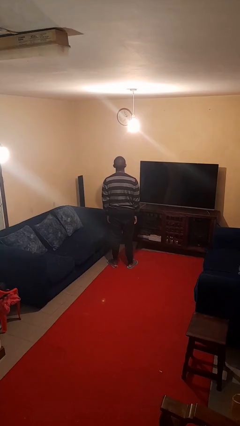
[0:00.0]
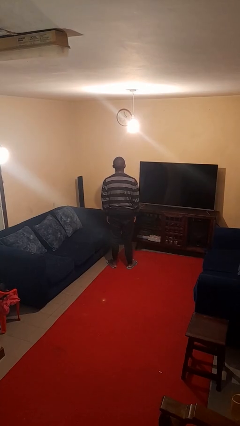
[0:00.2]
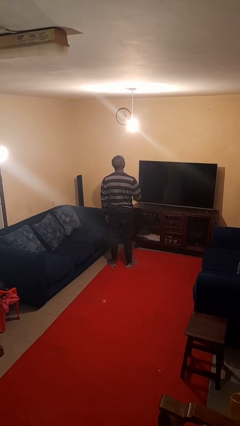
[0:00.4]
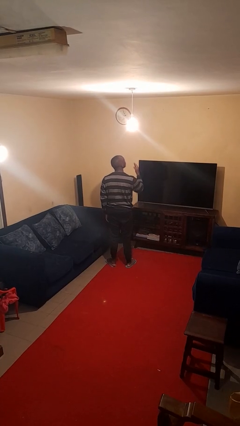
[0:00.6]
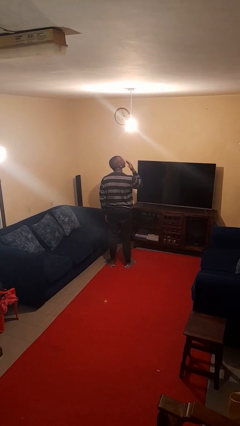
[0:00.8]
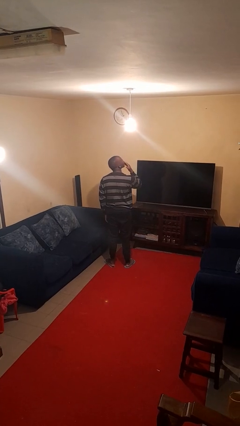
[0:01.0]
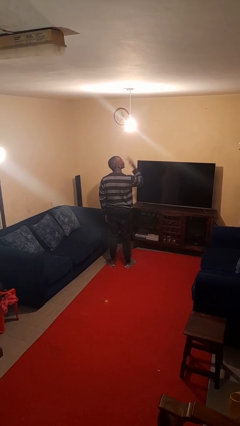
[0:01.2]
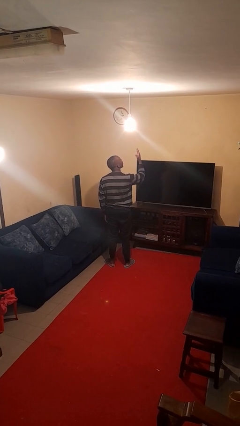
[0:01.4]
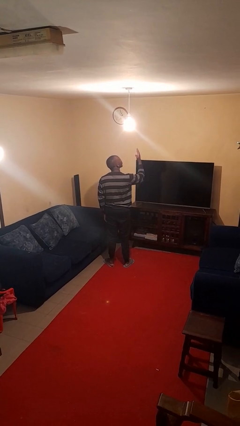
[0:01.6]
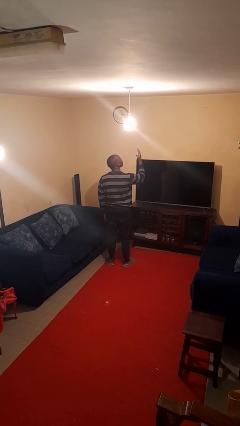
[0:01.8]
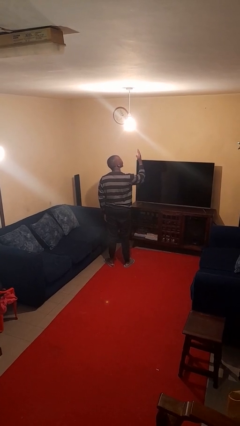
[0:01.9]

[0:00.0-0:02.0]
person gestures blow kiss

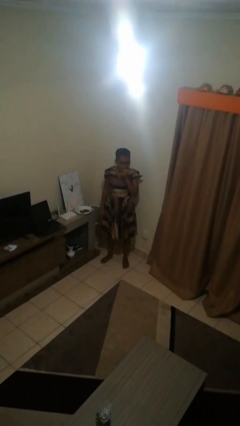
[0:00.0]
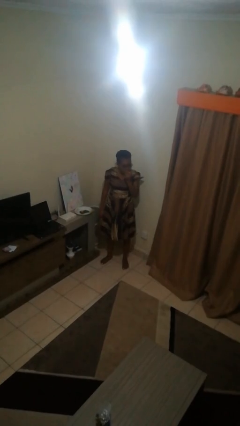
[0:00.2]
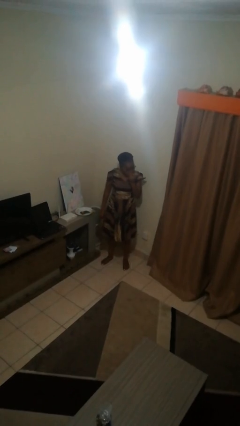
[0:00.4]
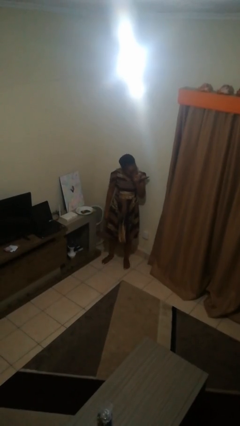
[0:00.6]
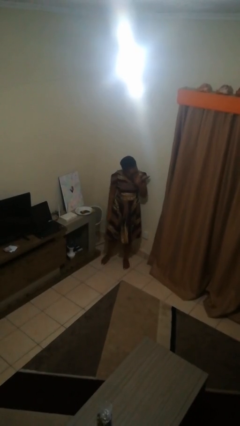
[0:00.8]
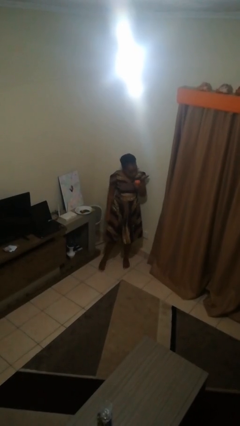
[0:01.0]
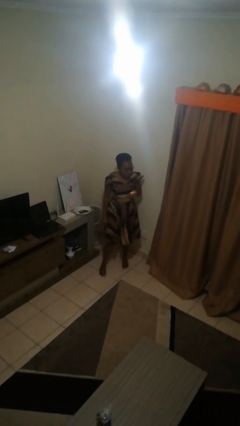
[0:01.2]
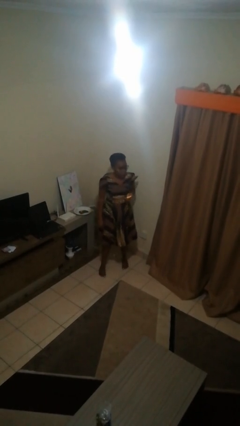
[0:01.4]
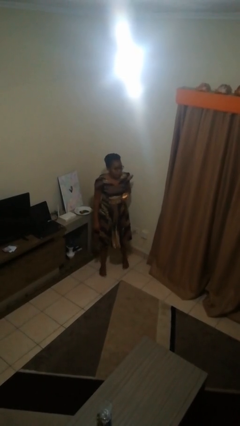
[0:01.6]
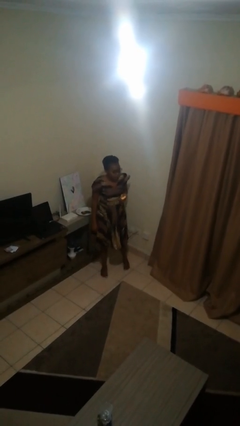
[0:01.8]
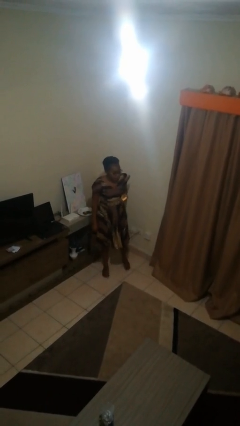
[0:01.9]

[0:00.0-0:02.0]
person eats apple

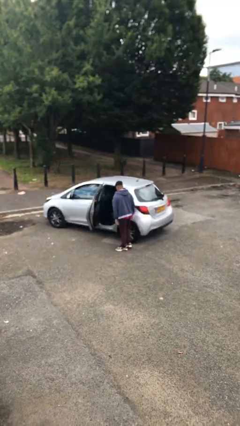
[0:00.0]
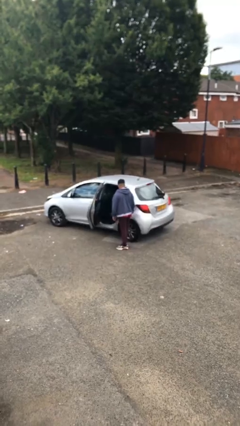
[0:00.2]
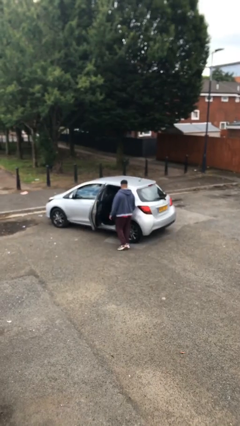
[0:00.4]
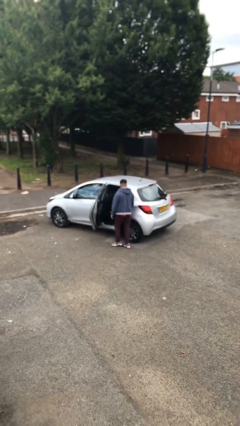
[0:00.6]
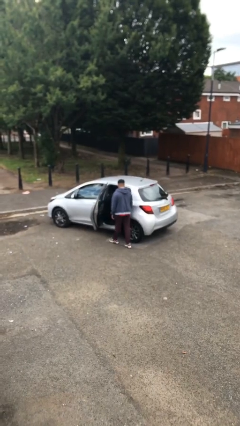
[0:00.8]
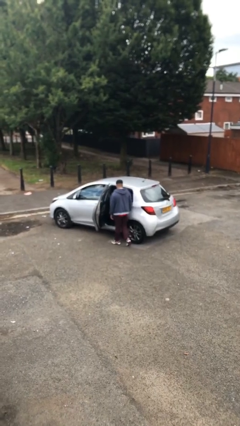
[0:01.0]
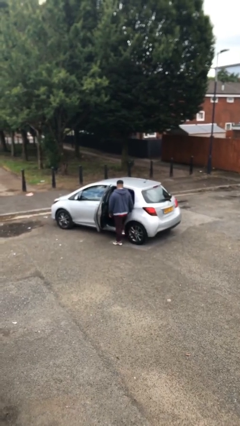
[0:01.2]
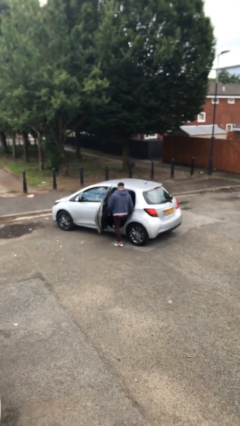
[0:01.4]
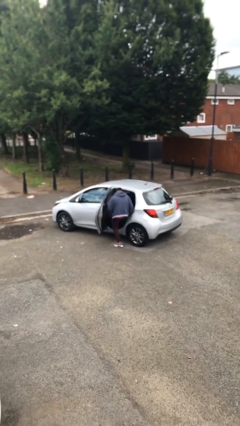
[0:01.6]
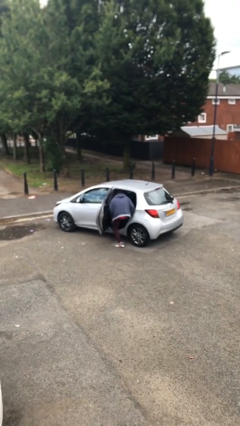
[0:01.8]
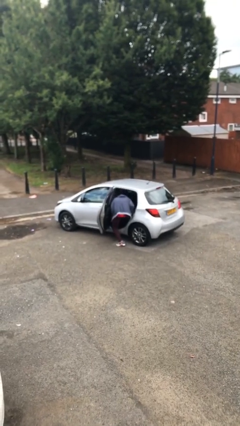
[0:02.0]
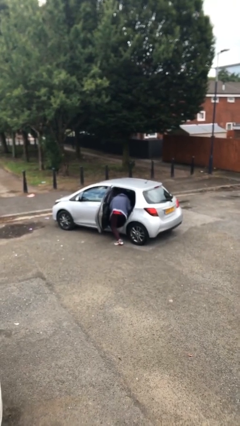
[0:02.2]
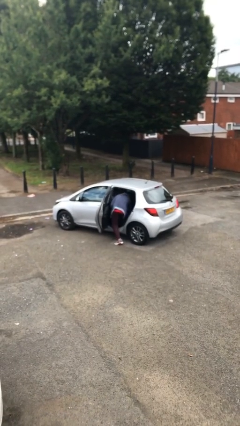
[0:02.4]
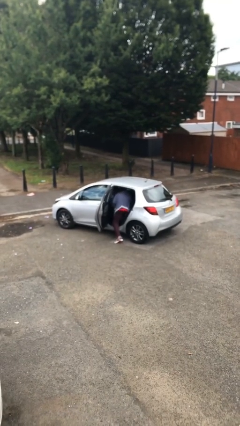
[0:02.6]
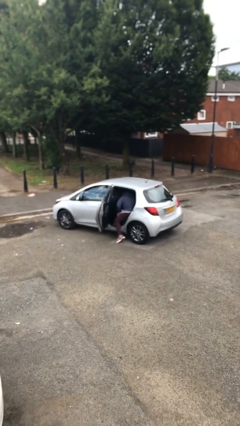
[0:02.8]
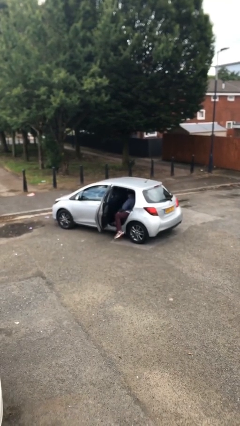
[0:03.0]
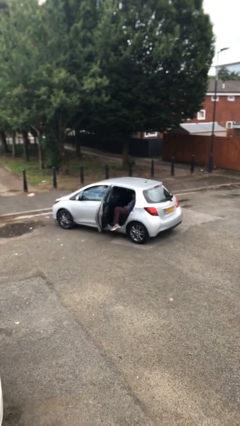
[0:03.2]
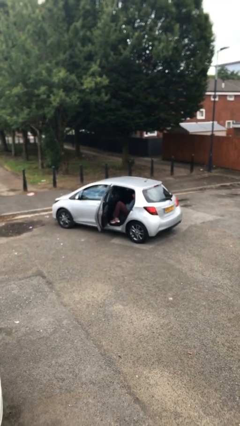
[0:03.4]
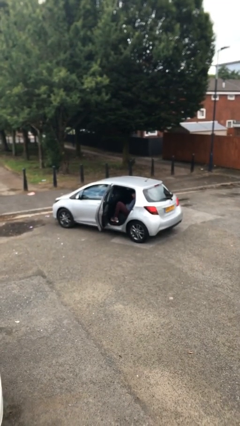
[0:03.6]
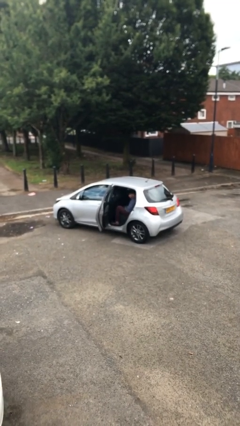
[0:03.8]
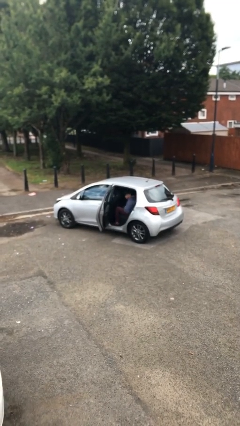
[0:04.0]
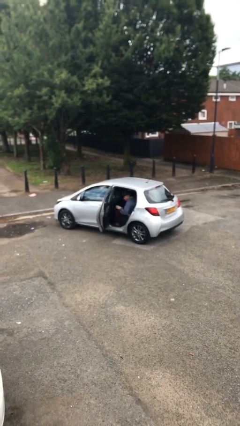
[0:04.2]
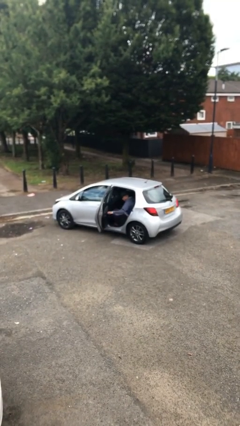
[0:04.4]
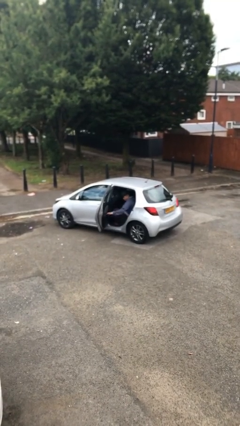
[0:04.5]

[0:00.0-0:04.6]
person enters car

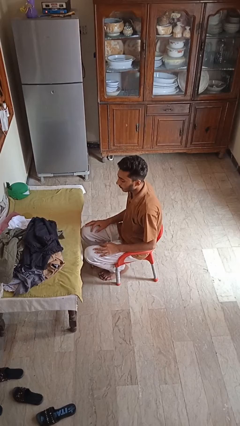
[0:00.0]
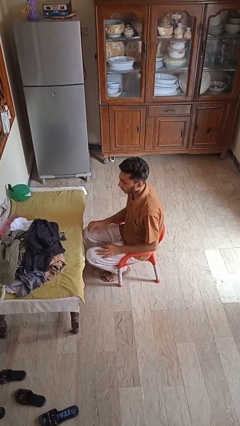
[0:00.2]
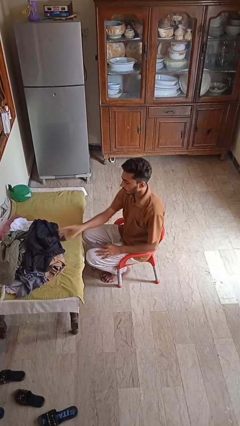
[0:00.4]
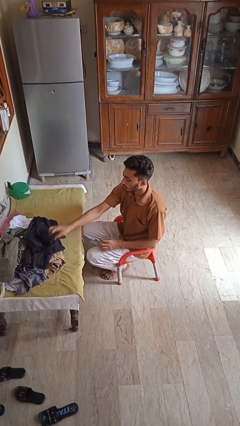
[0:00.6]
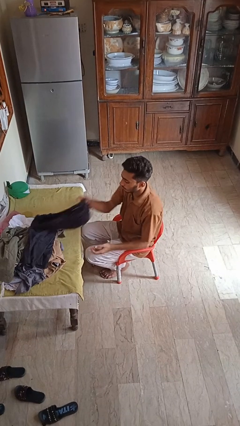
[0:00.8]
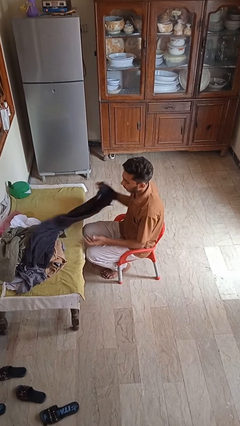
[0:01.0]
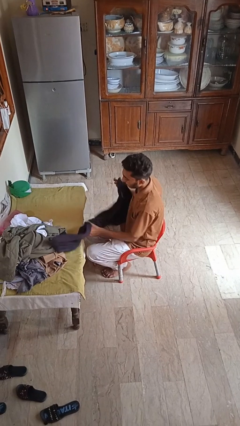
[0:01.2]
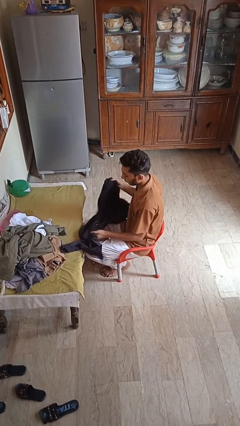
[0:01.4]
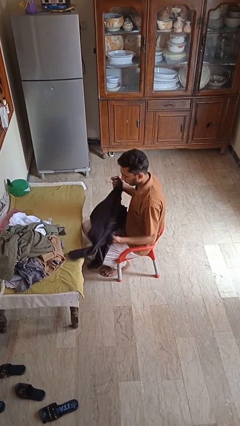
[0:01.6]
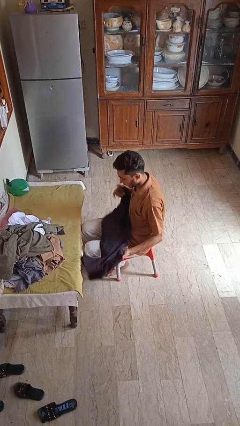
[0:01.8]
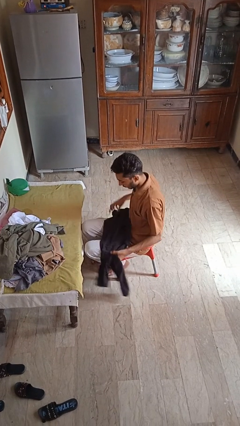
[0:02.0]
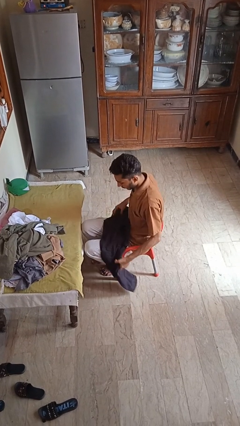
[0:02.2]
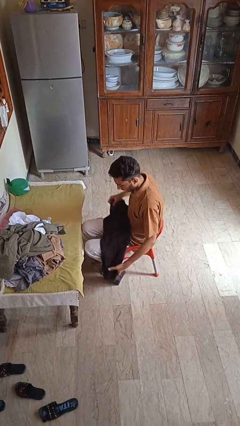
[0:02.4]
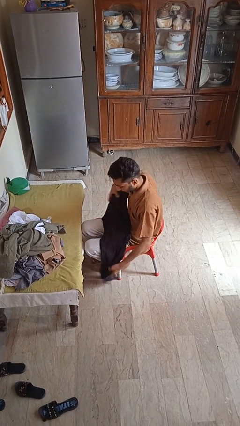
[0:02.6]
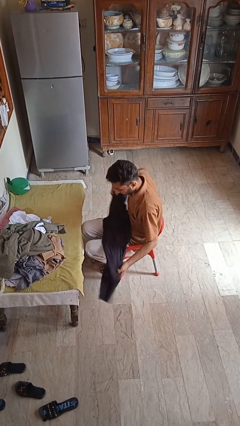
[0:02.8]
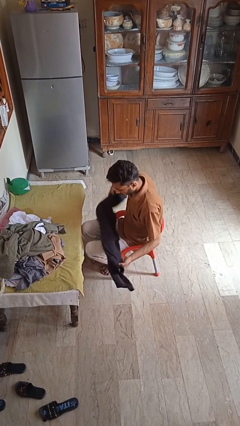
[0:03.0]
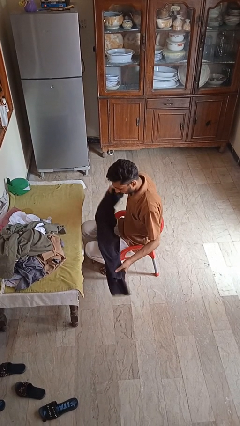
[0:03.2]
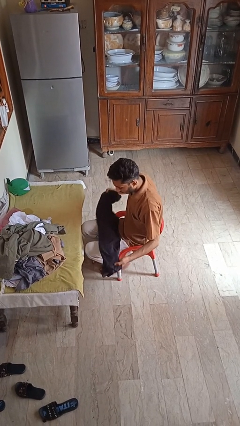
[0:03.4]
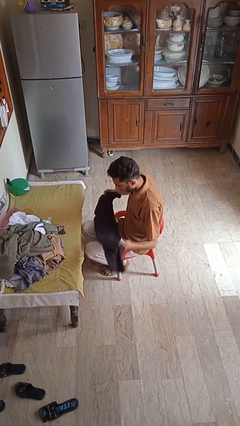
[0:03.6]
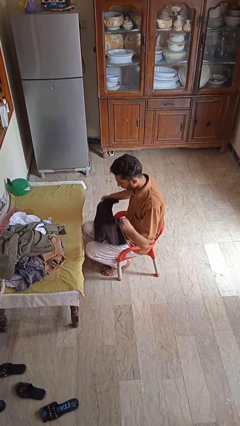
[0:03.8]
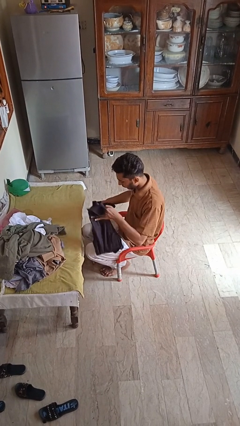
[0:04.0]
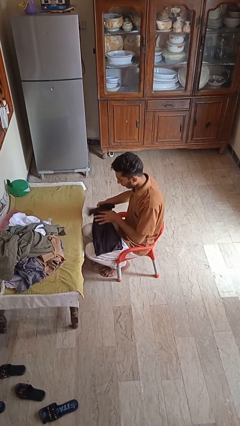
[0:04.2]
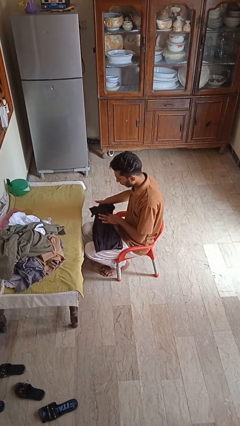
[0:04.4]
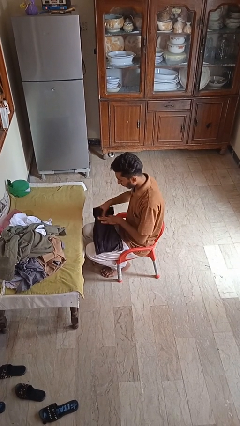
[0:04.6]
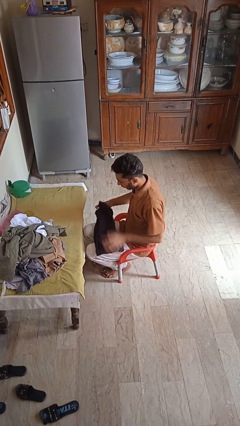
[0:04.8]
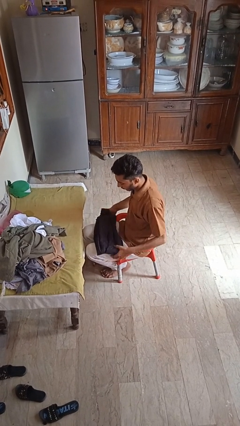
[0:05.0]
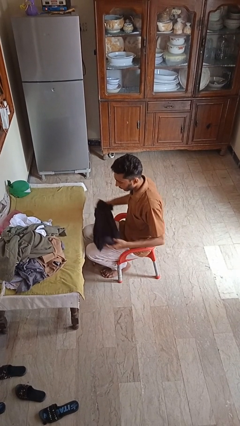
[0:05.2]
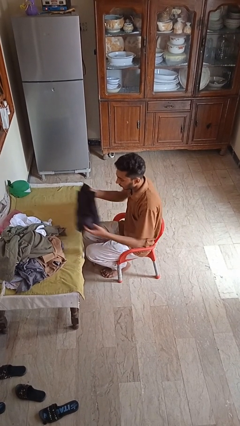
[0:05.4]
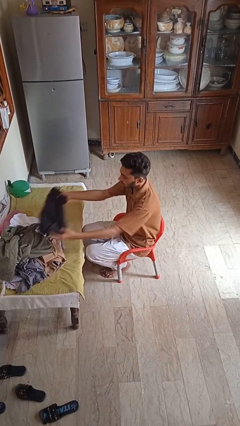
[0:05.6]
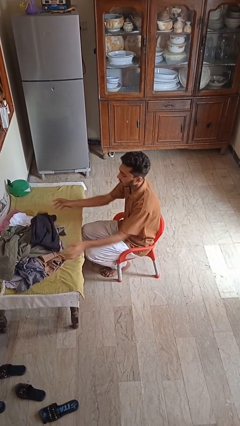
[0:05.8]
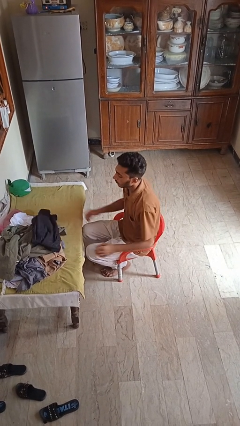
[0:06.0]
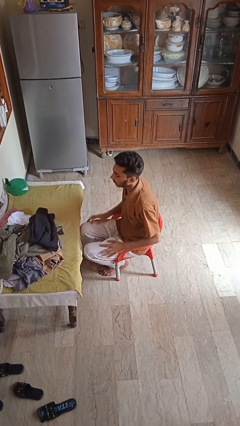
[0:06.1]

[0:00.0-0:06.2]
person folds pants

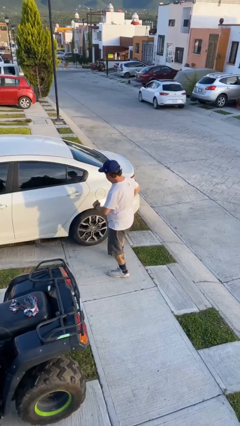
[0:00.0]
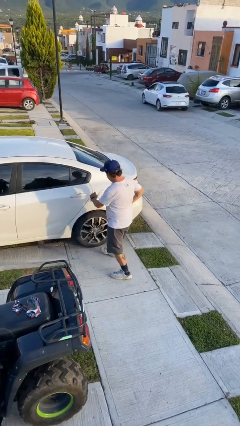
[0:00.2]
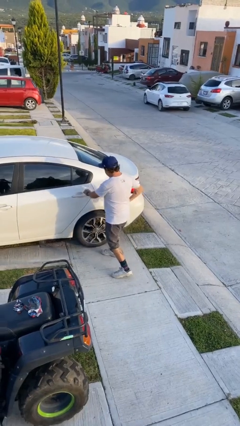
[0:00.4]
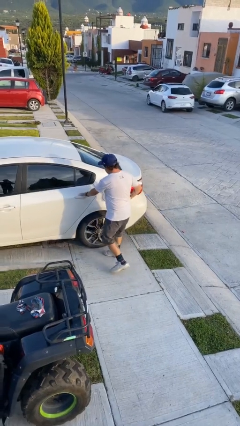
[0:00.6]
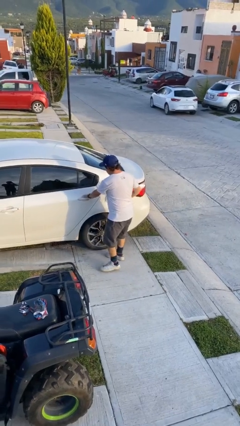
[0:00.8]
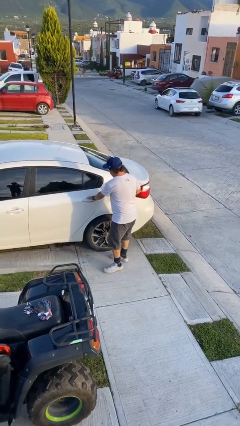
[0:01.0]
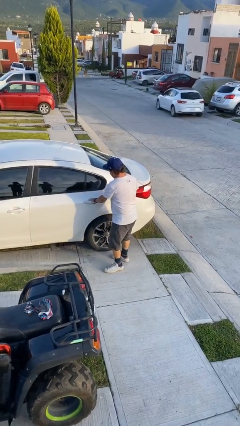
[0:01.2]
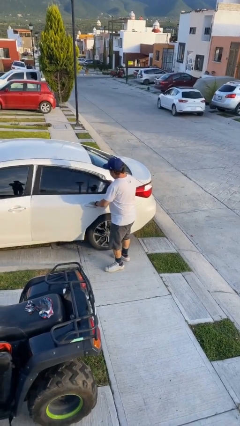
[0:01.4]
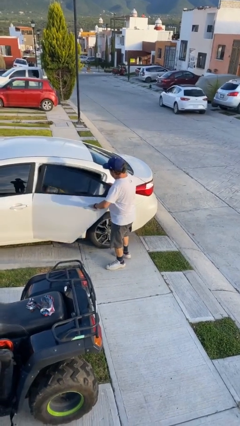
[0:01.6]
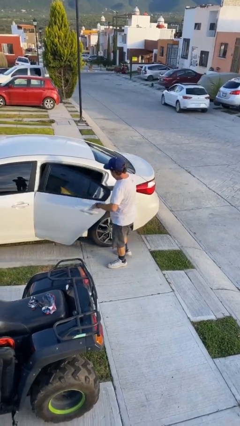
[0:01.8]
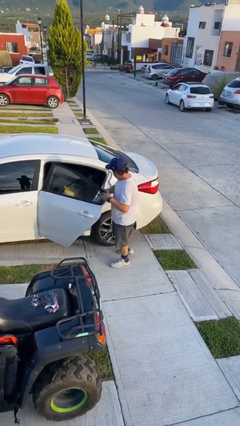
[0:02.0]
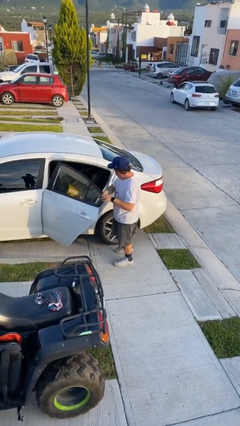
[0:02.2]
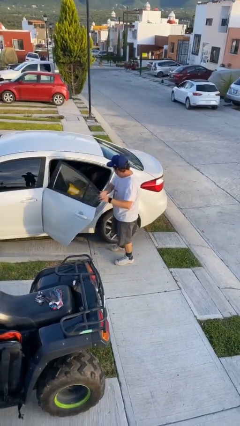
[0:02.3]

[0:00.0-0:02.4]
person opens car door

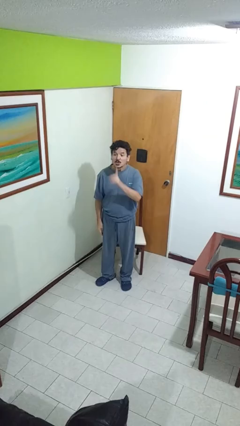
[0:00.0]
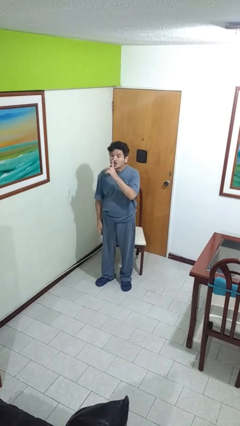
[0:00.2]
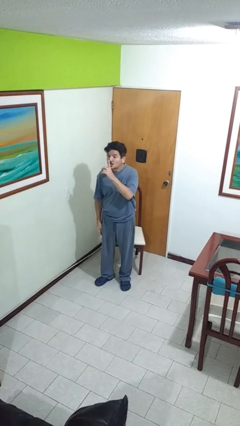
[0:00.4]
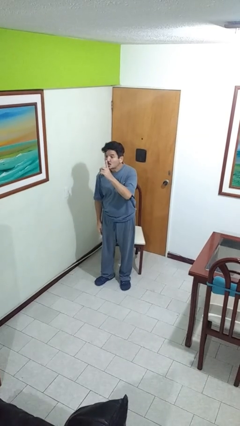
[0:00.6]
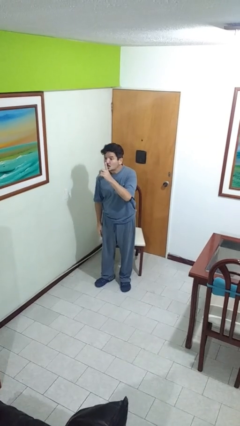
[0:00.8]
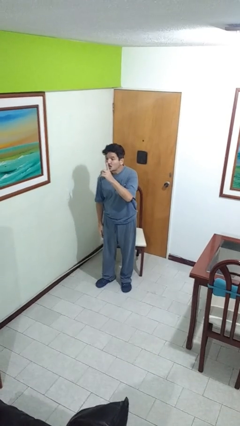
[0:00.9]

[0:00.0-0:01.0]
person gestures be quiet
